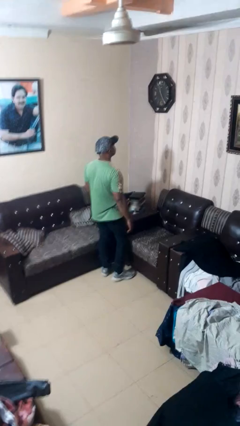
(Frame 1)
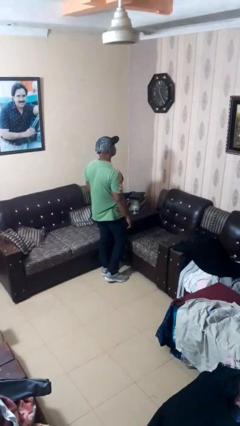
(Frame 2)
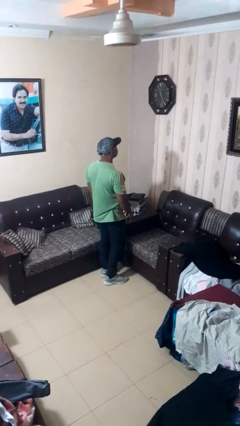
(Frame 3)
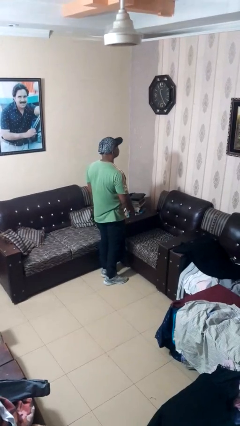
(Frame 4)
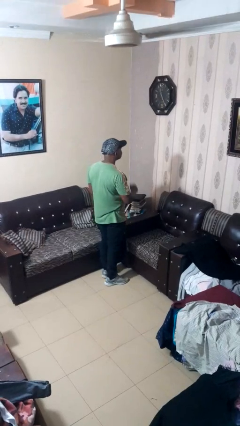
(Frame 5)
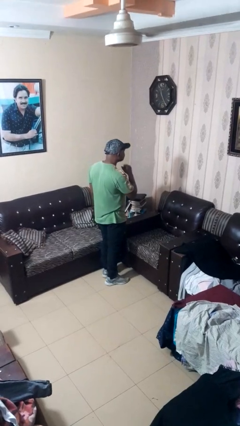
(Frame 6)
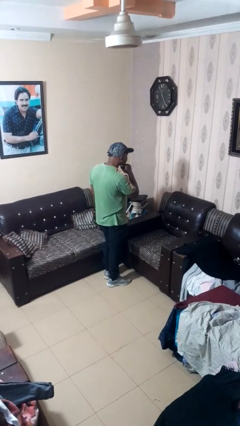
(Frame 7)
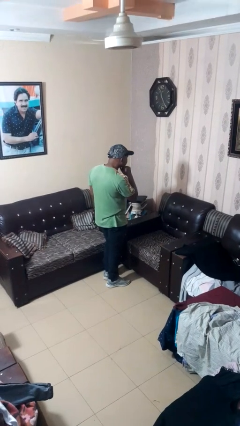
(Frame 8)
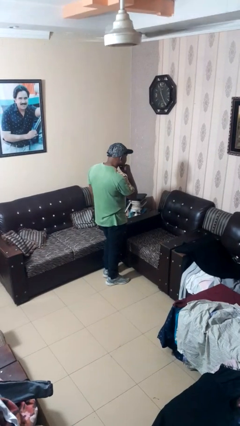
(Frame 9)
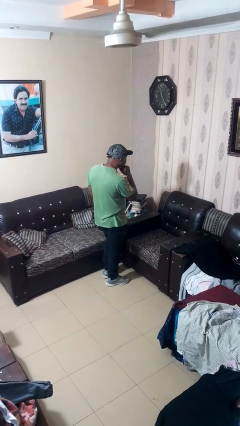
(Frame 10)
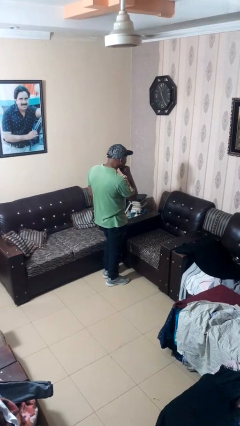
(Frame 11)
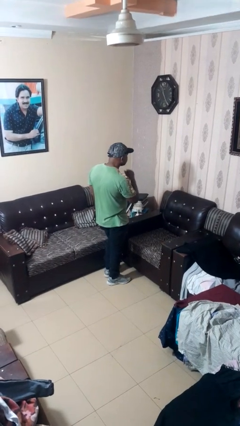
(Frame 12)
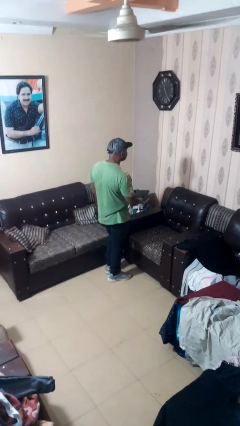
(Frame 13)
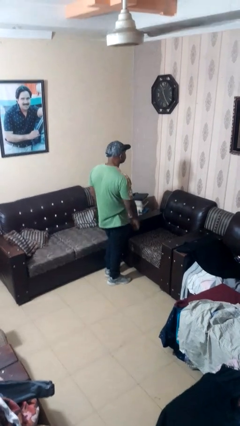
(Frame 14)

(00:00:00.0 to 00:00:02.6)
person strokes chin

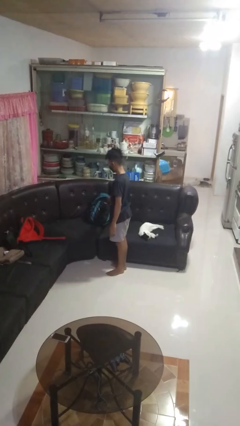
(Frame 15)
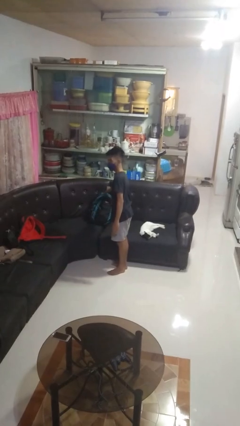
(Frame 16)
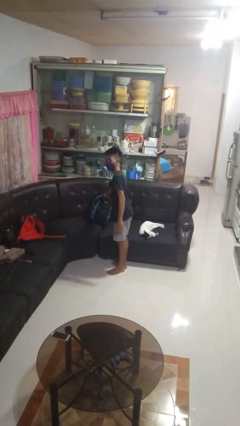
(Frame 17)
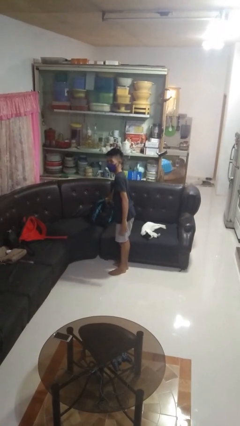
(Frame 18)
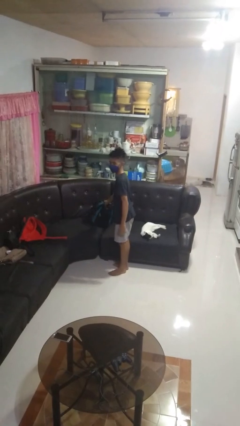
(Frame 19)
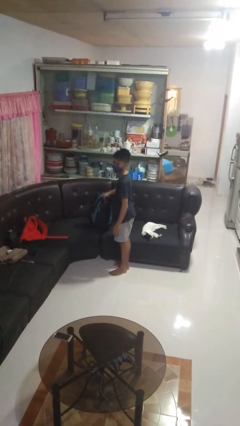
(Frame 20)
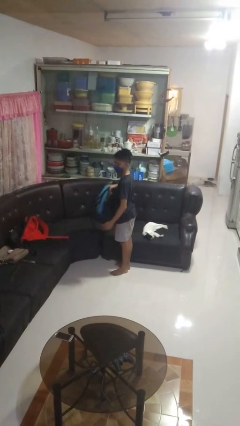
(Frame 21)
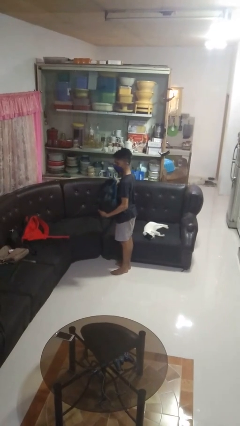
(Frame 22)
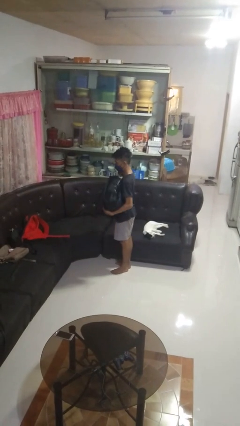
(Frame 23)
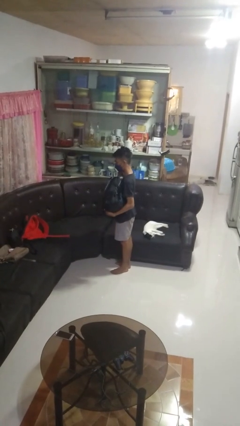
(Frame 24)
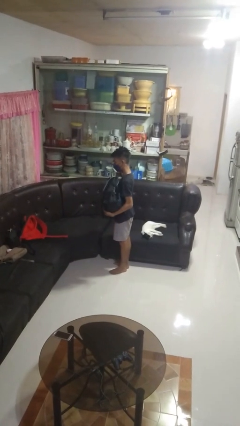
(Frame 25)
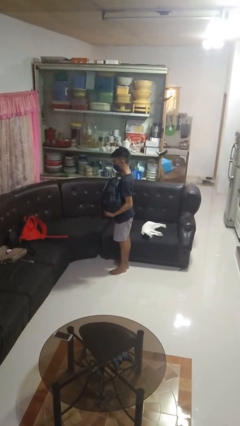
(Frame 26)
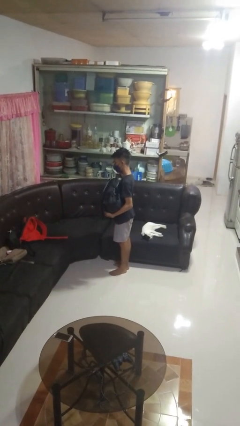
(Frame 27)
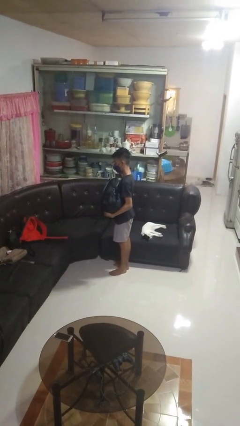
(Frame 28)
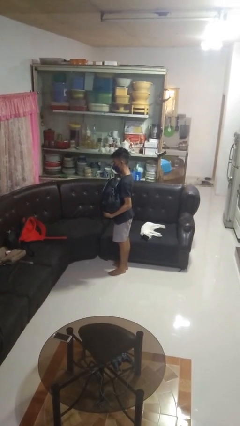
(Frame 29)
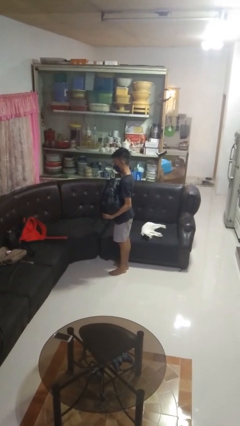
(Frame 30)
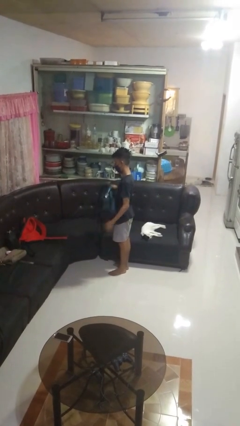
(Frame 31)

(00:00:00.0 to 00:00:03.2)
person picks up object from couch

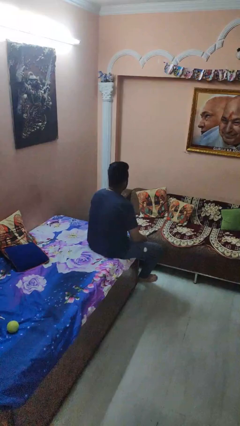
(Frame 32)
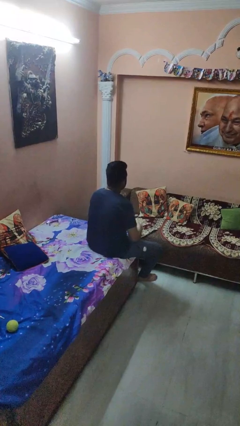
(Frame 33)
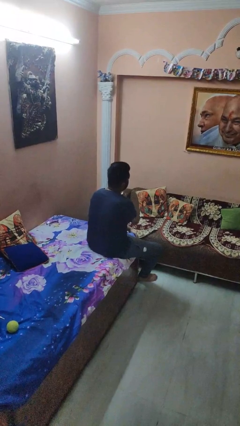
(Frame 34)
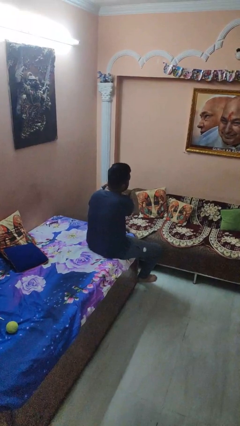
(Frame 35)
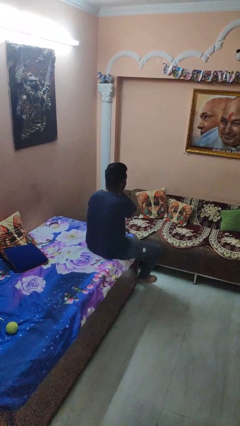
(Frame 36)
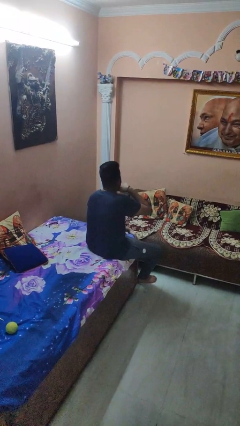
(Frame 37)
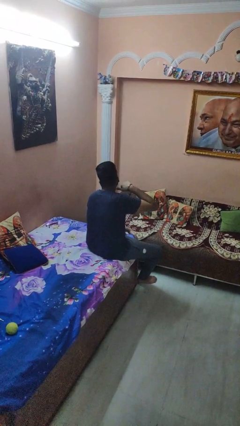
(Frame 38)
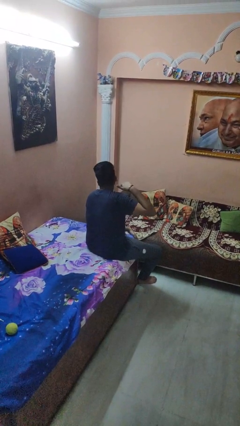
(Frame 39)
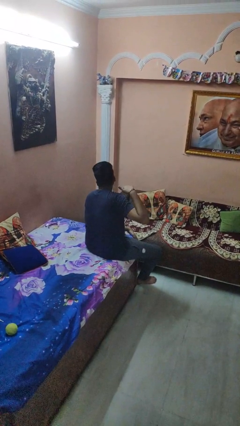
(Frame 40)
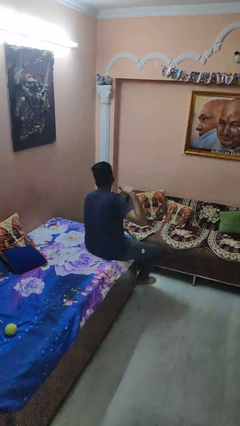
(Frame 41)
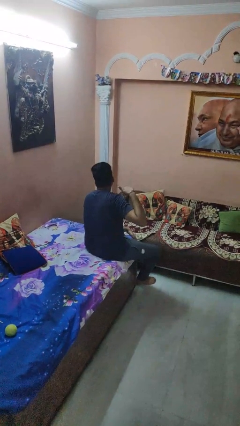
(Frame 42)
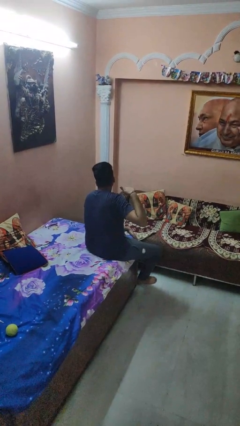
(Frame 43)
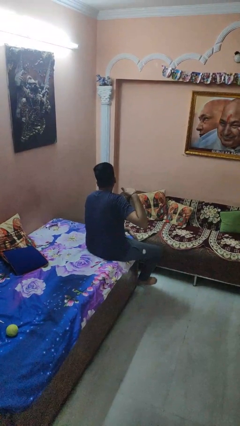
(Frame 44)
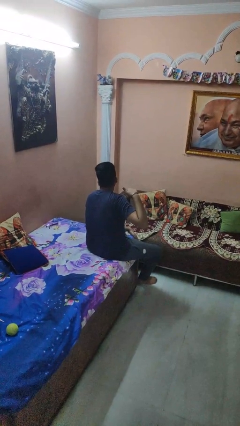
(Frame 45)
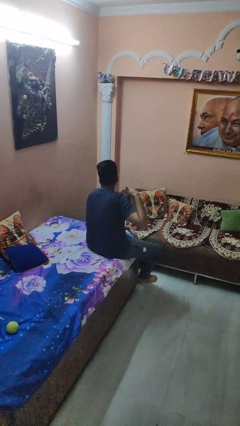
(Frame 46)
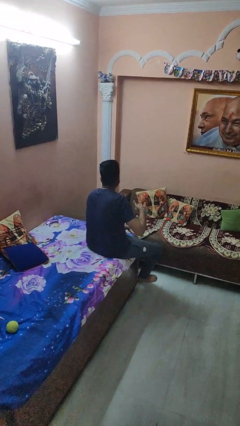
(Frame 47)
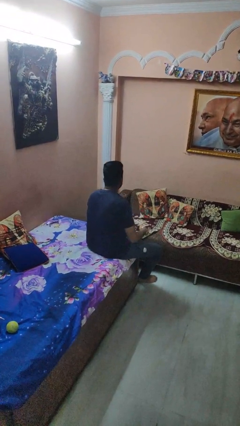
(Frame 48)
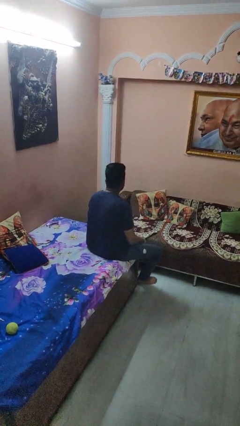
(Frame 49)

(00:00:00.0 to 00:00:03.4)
person gestures cut

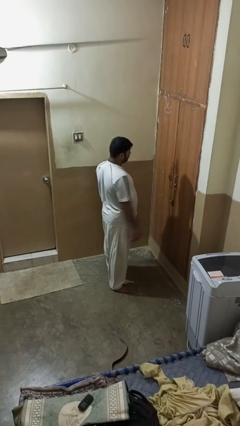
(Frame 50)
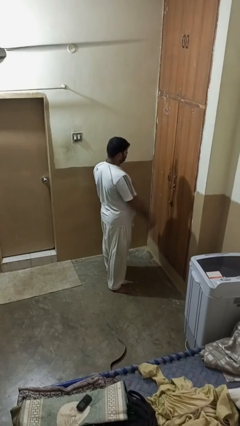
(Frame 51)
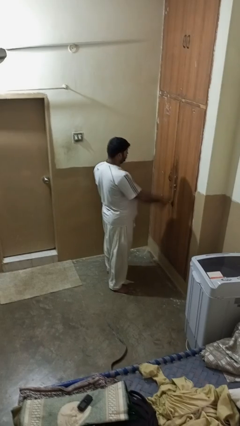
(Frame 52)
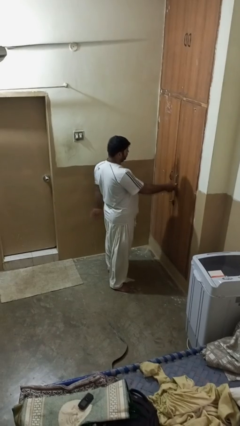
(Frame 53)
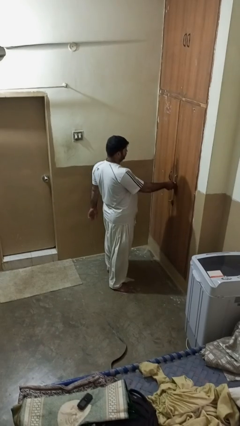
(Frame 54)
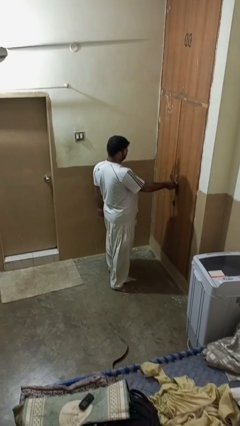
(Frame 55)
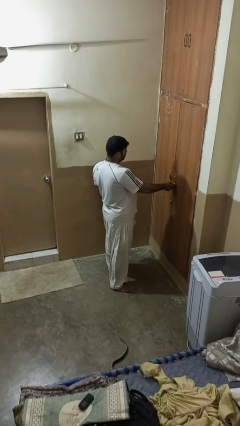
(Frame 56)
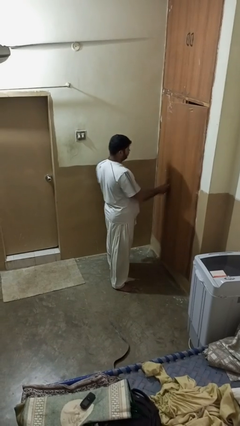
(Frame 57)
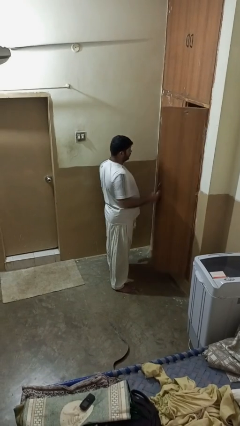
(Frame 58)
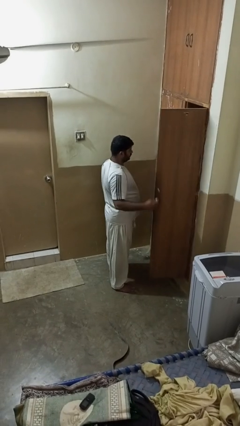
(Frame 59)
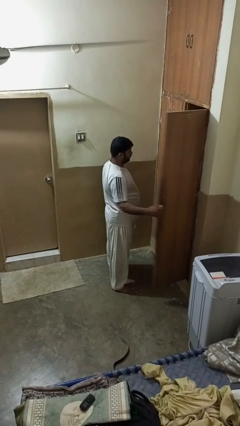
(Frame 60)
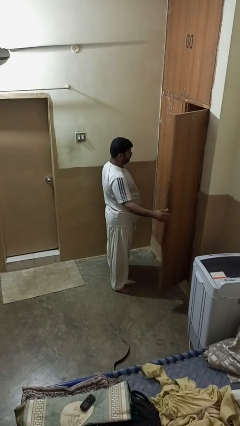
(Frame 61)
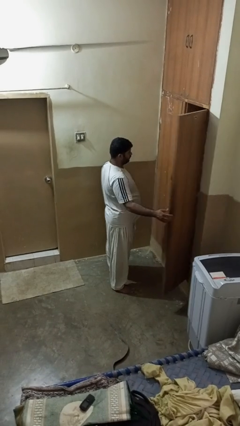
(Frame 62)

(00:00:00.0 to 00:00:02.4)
person opens closet door

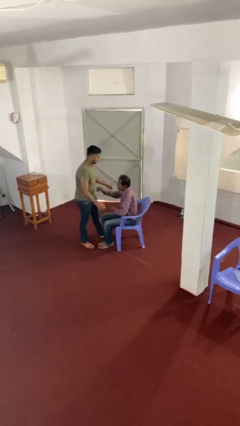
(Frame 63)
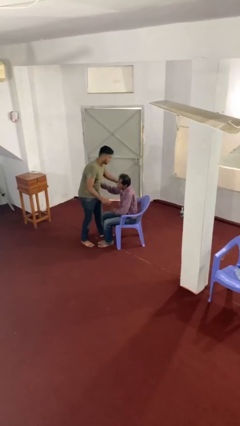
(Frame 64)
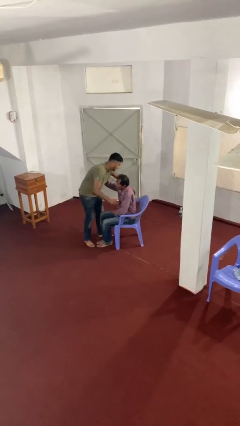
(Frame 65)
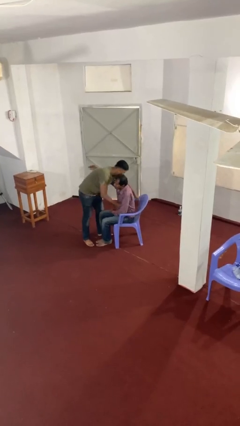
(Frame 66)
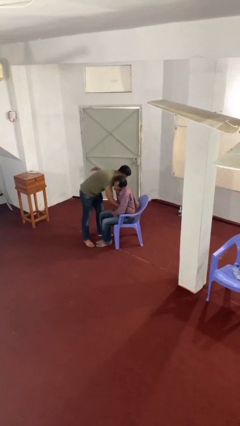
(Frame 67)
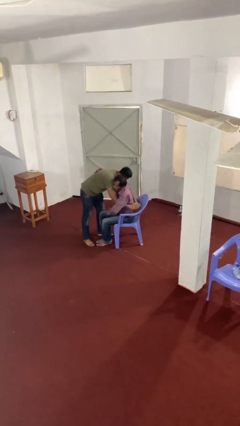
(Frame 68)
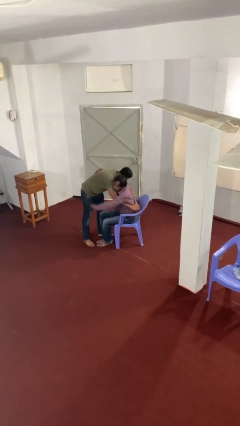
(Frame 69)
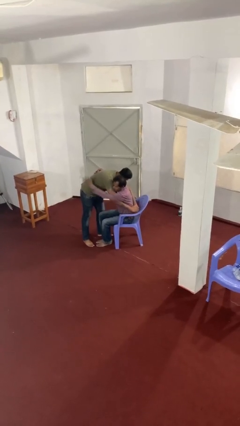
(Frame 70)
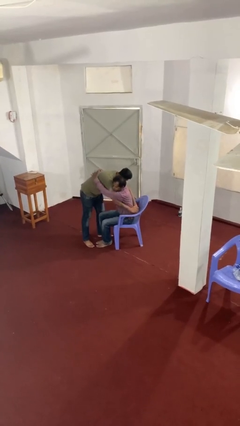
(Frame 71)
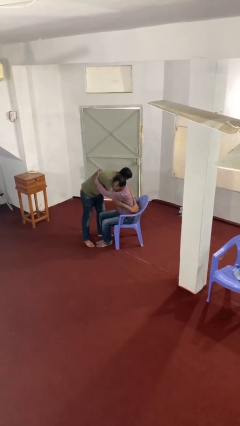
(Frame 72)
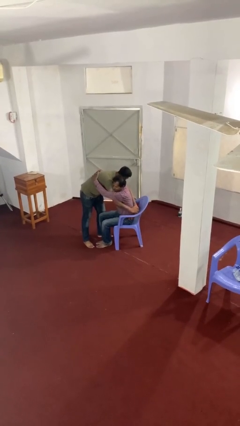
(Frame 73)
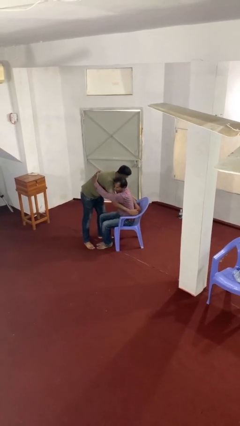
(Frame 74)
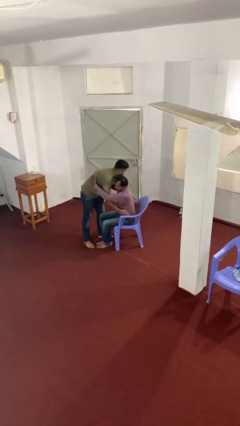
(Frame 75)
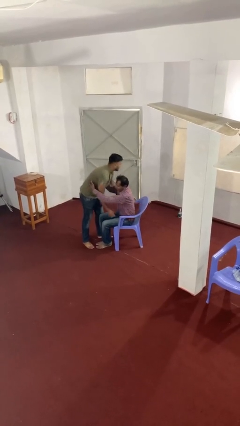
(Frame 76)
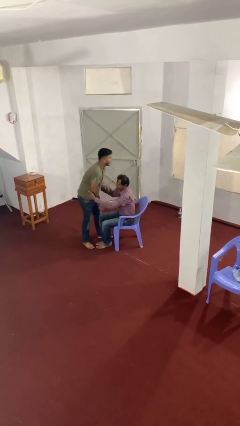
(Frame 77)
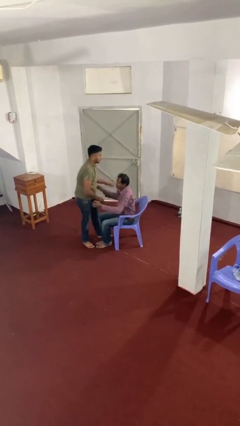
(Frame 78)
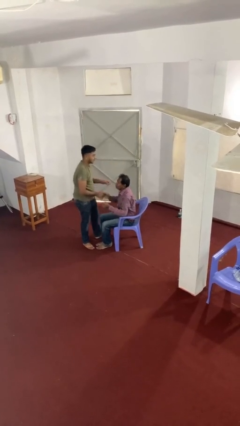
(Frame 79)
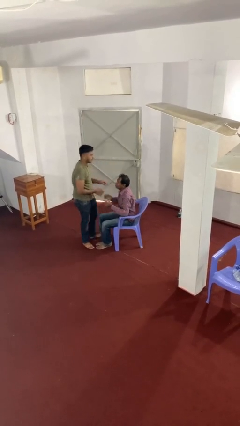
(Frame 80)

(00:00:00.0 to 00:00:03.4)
person embraces person

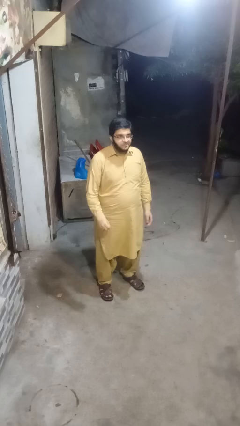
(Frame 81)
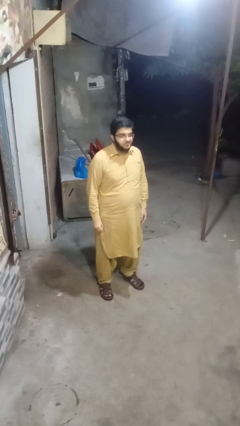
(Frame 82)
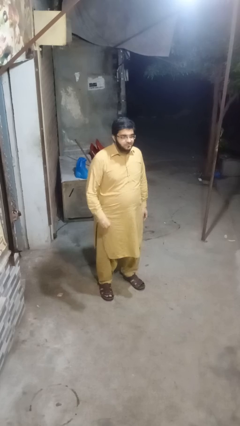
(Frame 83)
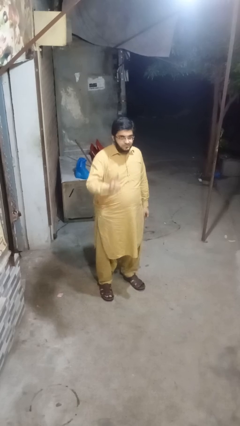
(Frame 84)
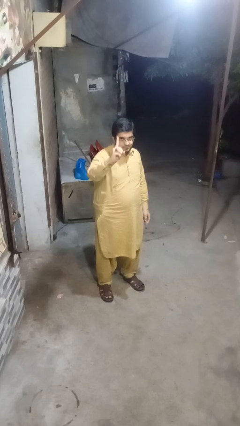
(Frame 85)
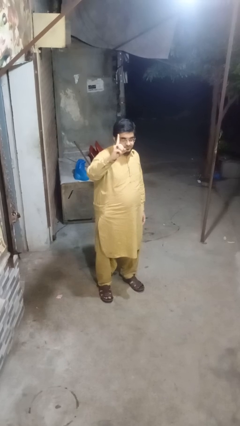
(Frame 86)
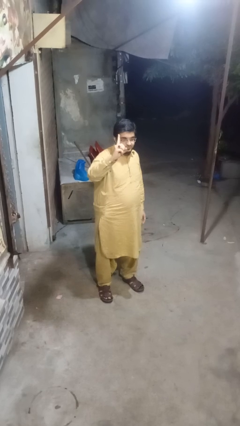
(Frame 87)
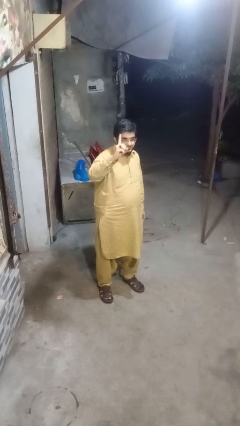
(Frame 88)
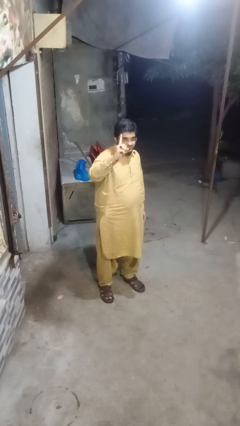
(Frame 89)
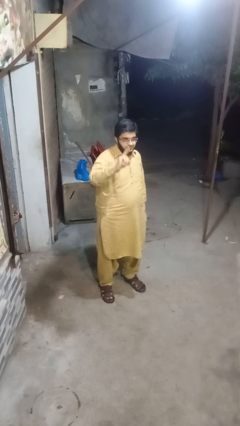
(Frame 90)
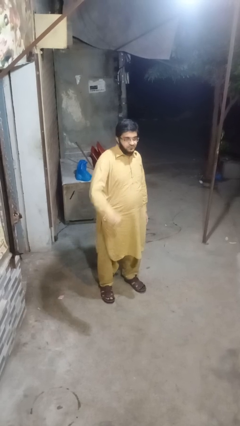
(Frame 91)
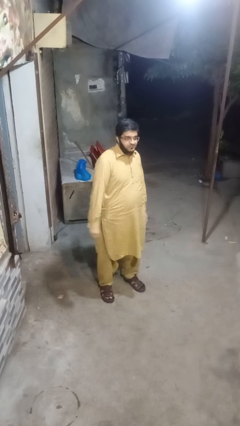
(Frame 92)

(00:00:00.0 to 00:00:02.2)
person gestures number one

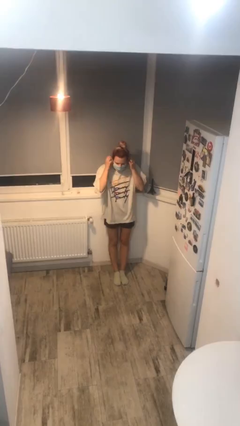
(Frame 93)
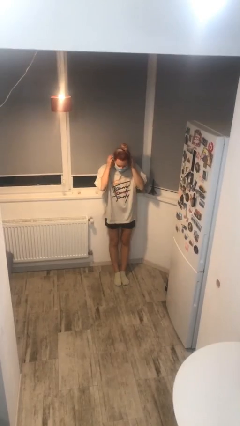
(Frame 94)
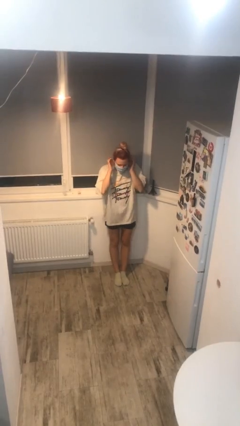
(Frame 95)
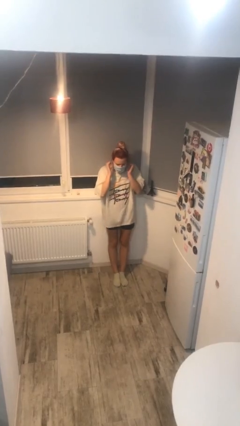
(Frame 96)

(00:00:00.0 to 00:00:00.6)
person puts on facemask
